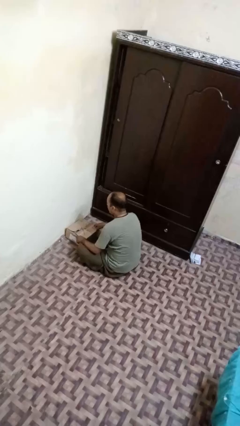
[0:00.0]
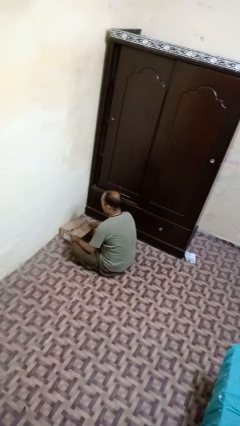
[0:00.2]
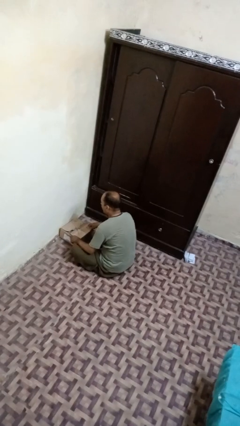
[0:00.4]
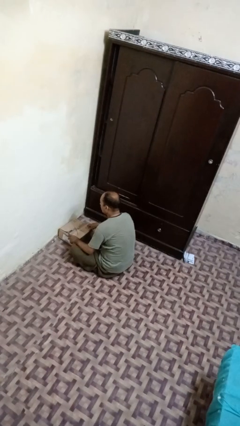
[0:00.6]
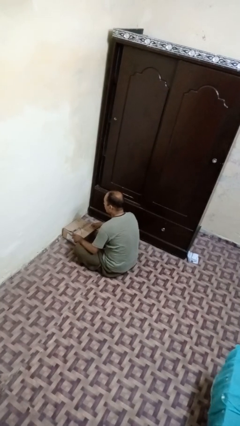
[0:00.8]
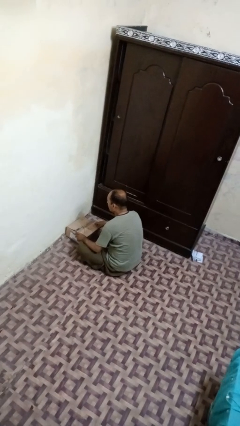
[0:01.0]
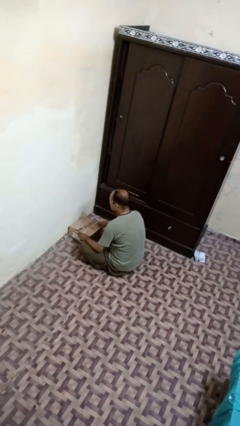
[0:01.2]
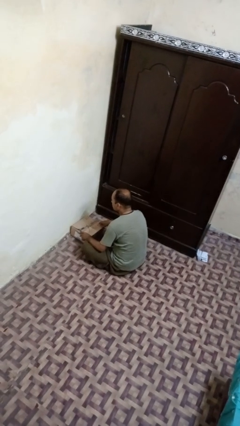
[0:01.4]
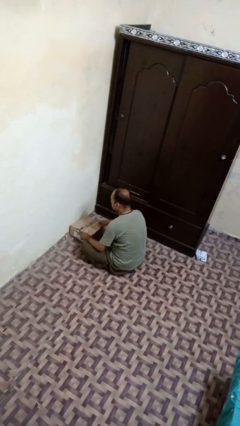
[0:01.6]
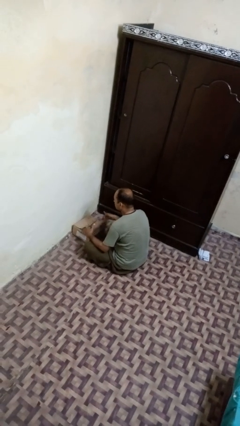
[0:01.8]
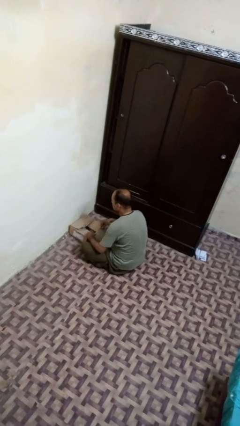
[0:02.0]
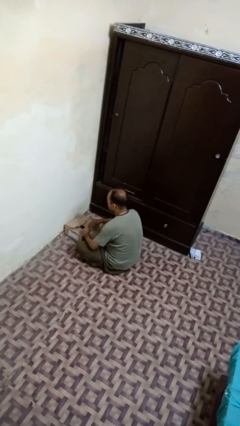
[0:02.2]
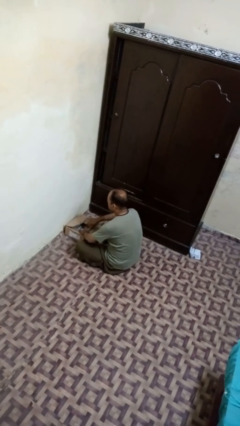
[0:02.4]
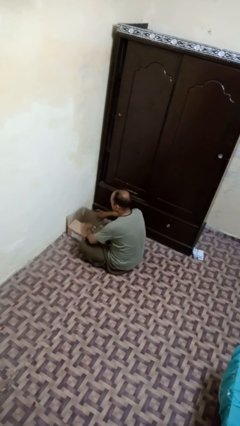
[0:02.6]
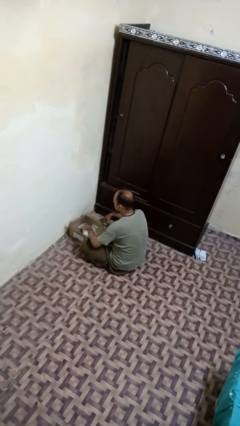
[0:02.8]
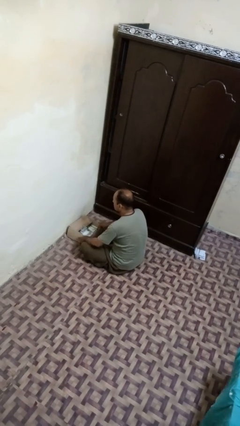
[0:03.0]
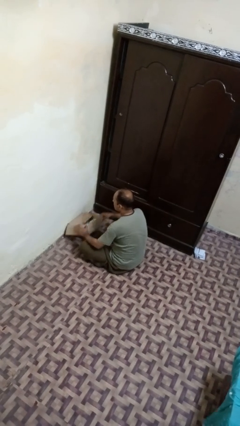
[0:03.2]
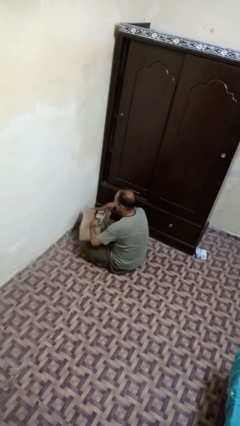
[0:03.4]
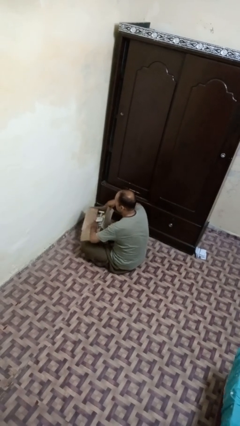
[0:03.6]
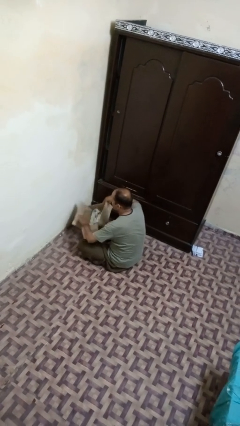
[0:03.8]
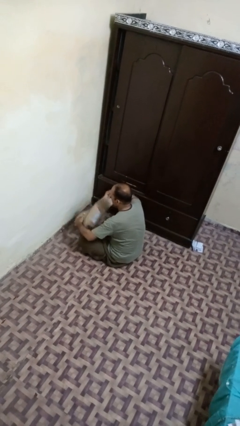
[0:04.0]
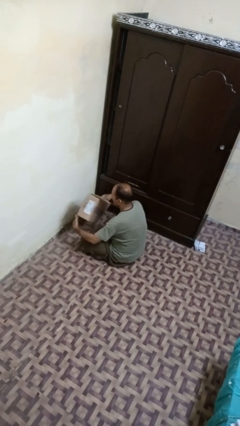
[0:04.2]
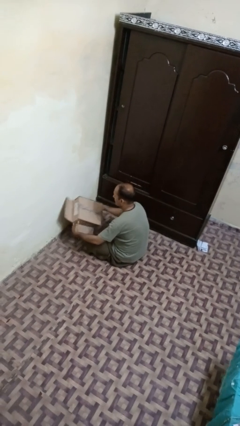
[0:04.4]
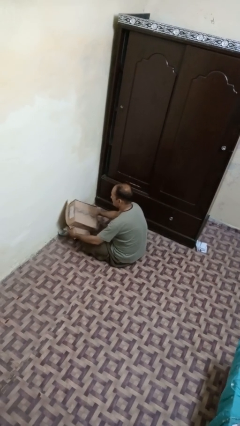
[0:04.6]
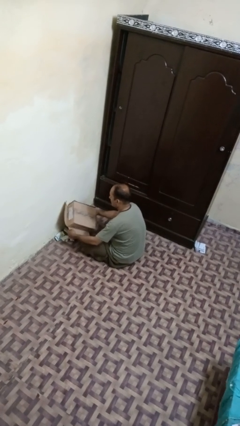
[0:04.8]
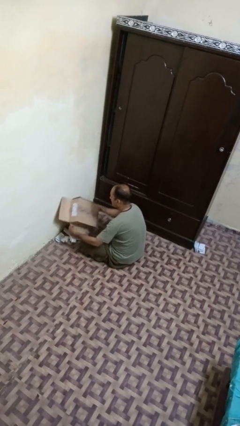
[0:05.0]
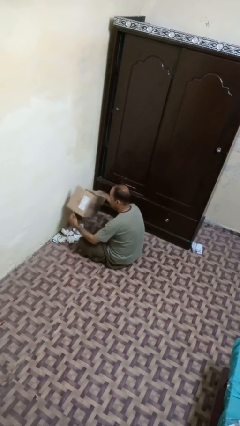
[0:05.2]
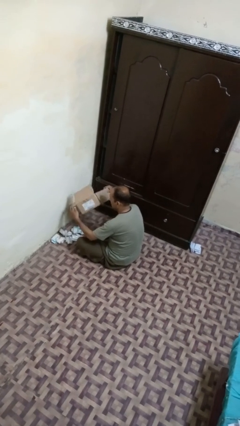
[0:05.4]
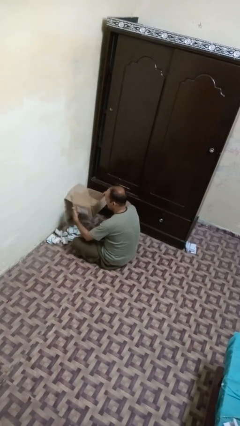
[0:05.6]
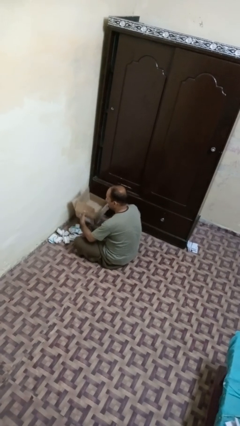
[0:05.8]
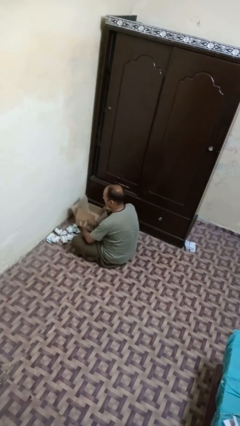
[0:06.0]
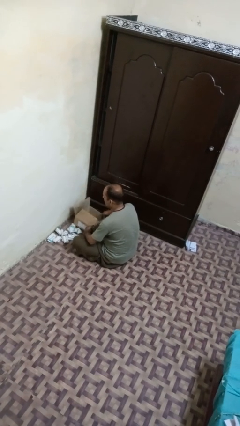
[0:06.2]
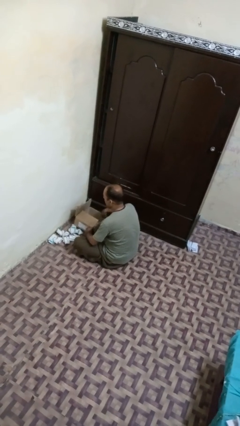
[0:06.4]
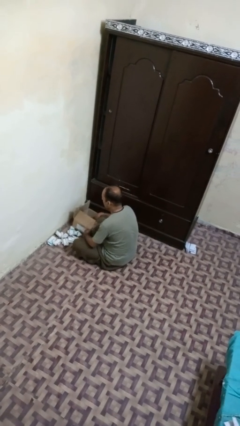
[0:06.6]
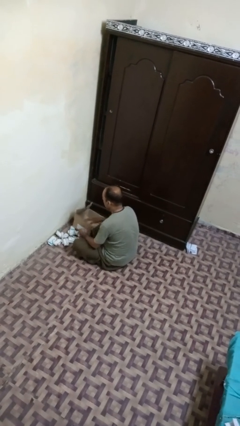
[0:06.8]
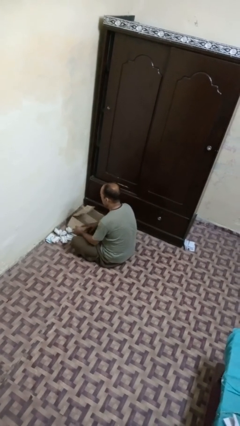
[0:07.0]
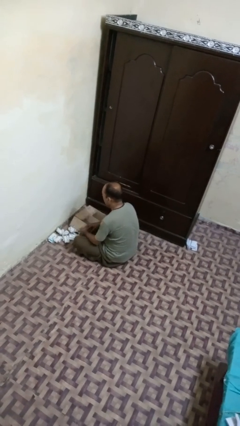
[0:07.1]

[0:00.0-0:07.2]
person unloads box onto floor

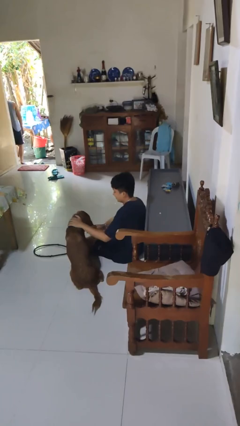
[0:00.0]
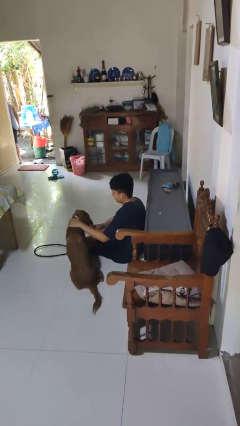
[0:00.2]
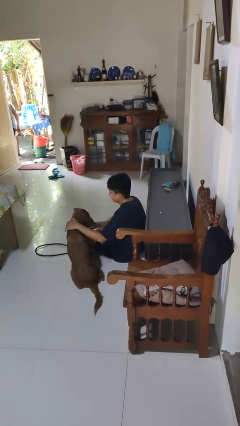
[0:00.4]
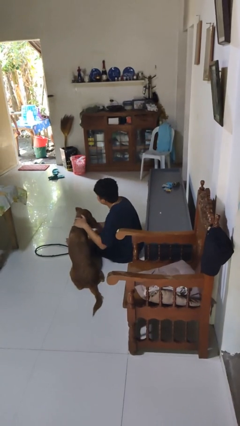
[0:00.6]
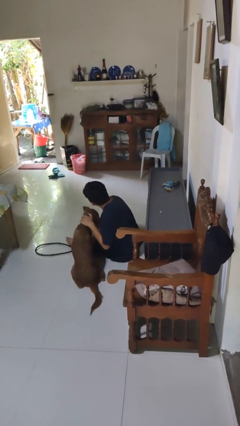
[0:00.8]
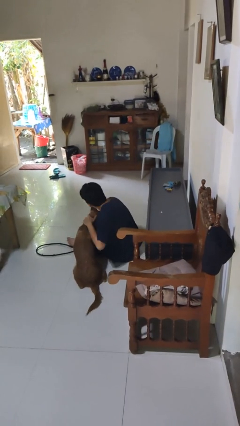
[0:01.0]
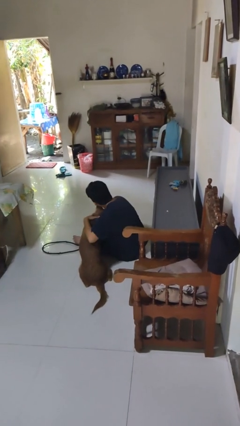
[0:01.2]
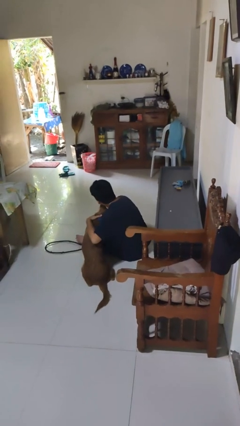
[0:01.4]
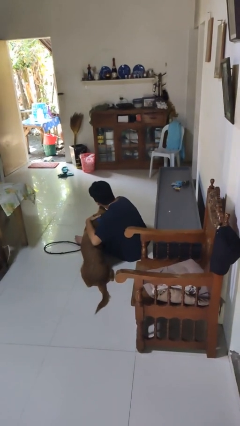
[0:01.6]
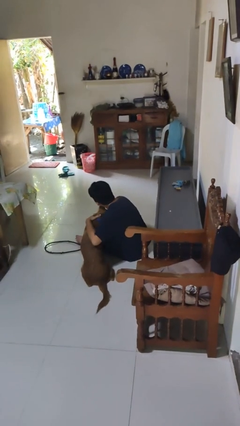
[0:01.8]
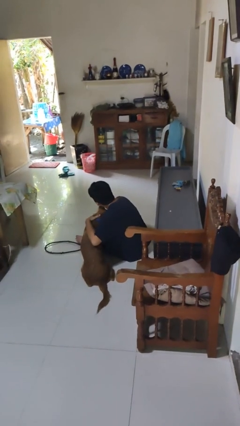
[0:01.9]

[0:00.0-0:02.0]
person hugs dog

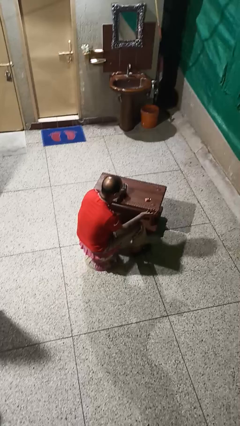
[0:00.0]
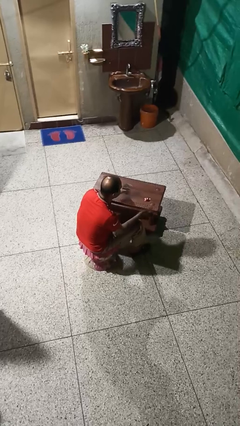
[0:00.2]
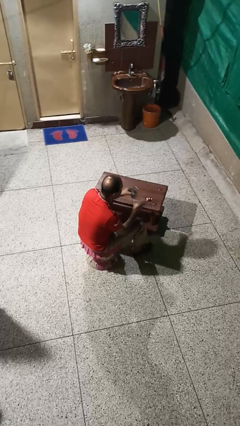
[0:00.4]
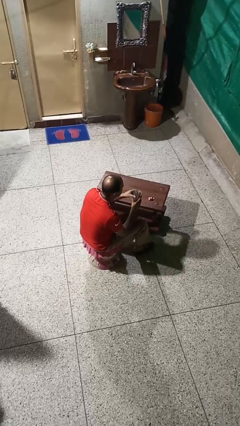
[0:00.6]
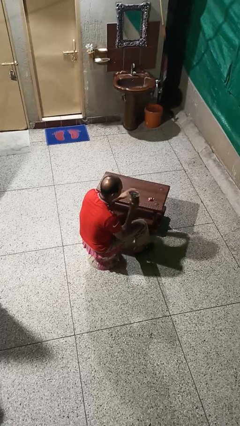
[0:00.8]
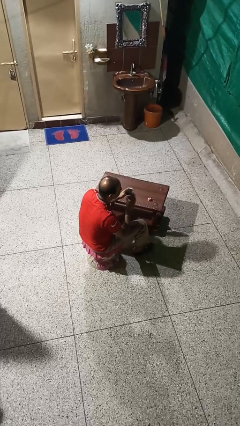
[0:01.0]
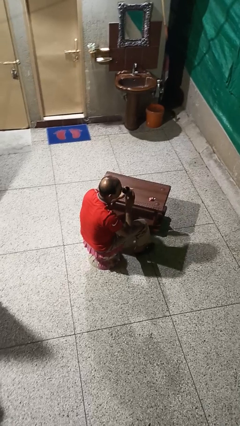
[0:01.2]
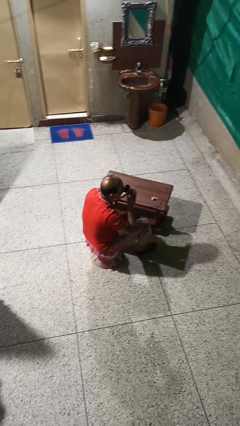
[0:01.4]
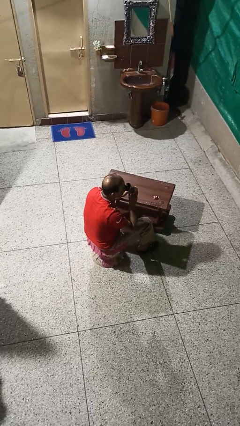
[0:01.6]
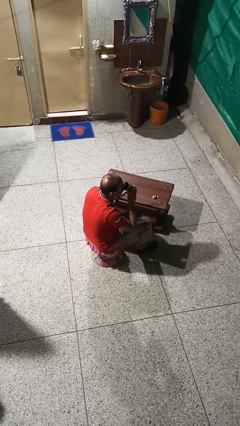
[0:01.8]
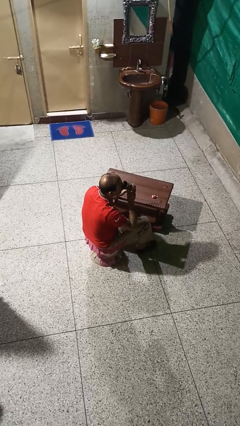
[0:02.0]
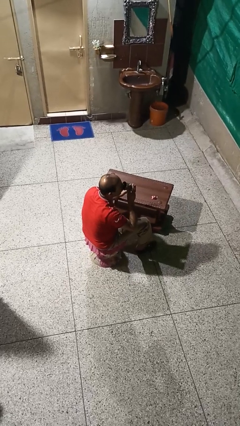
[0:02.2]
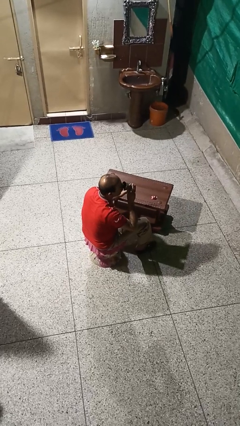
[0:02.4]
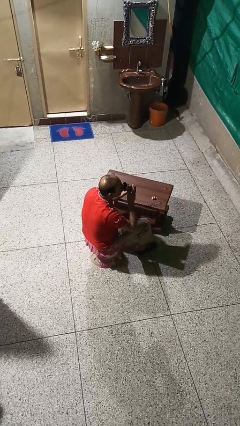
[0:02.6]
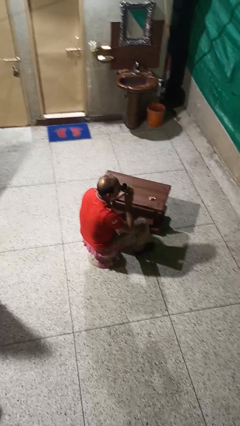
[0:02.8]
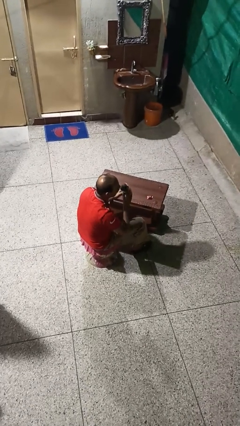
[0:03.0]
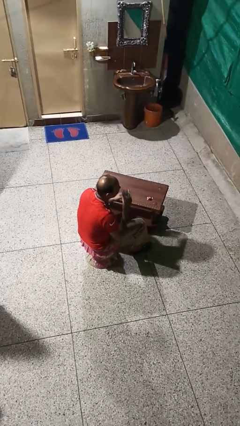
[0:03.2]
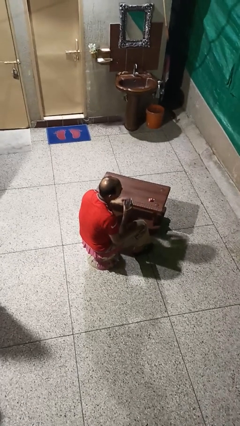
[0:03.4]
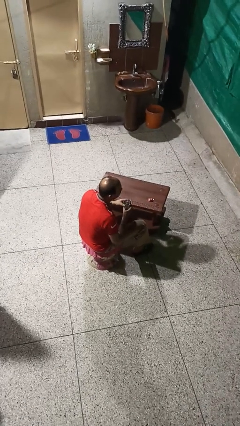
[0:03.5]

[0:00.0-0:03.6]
person drinks from cup

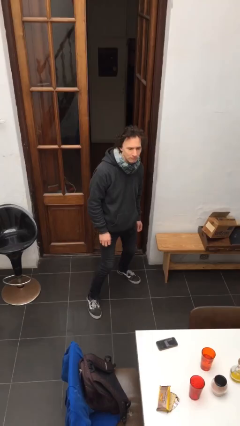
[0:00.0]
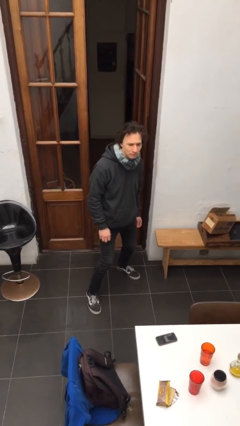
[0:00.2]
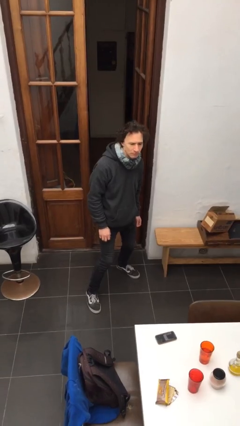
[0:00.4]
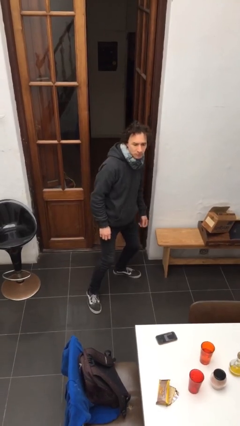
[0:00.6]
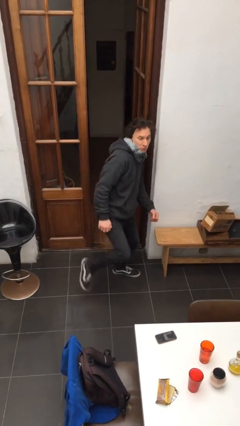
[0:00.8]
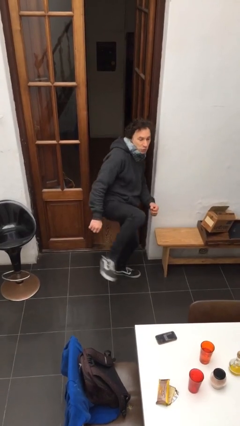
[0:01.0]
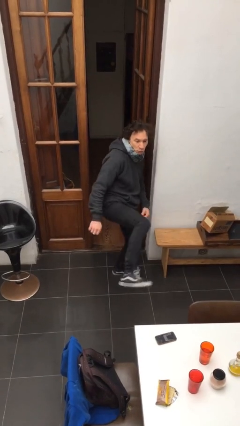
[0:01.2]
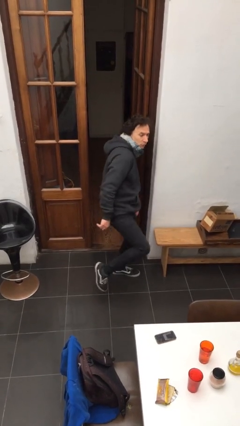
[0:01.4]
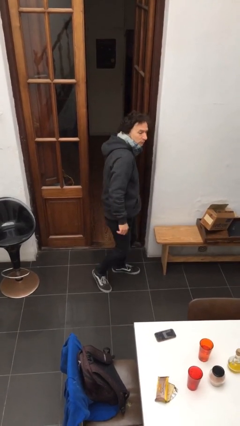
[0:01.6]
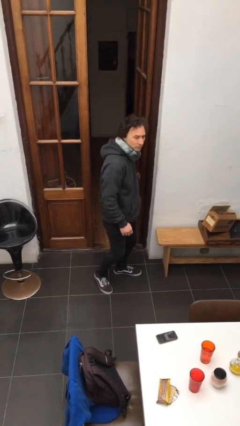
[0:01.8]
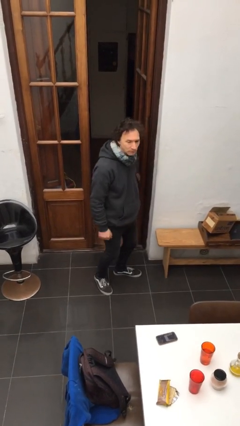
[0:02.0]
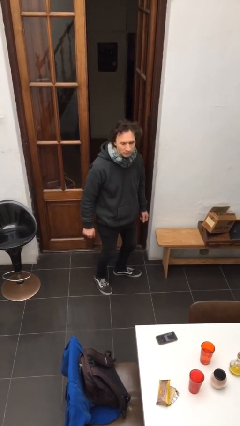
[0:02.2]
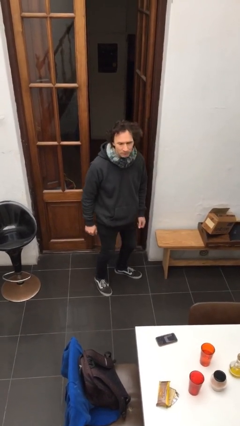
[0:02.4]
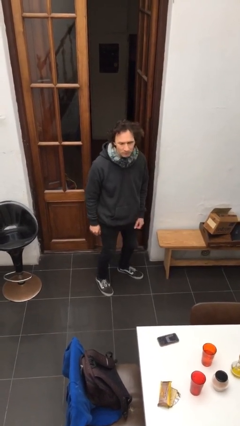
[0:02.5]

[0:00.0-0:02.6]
person karate kicks

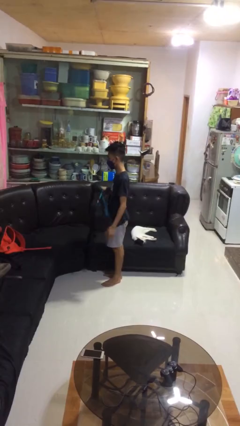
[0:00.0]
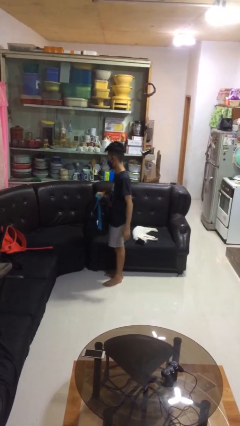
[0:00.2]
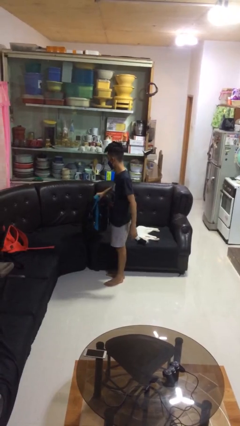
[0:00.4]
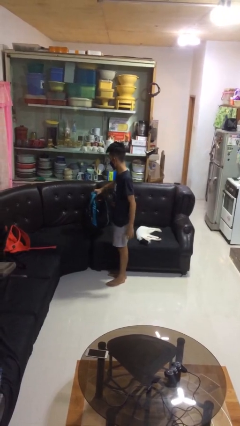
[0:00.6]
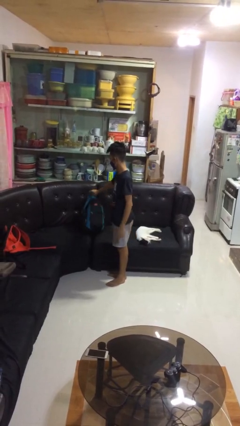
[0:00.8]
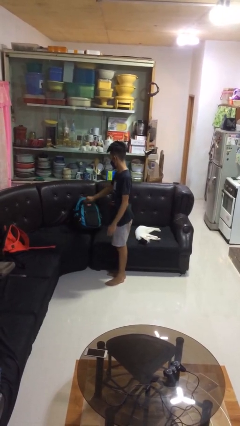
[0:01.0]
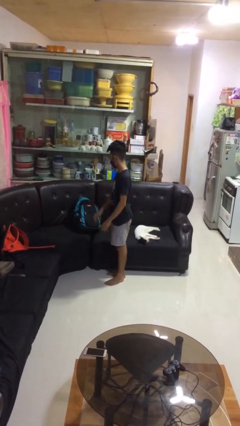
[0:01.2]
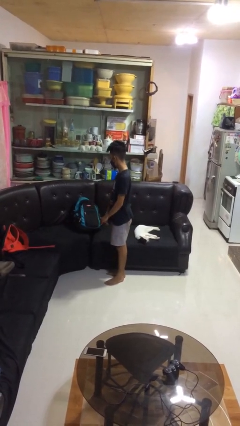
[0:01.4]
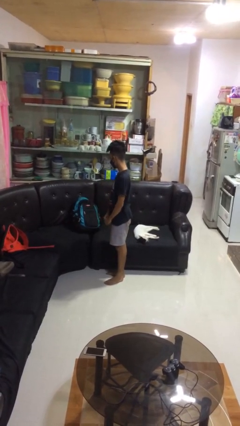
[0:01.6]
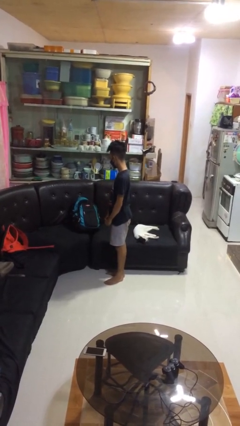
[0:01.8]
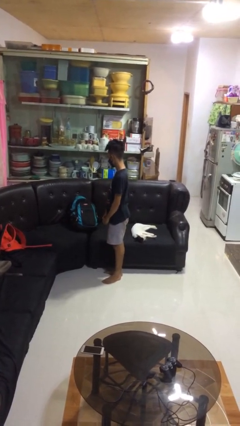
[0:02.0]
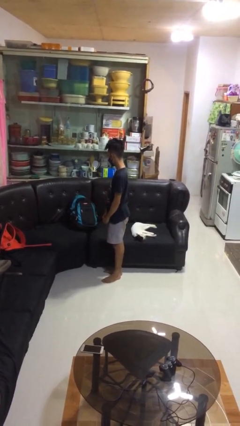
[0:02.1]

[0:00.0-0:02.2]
person puts down object on couch
